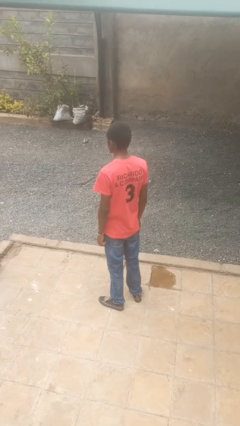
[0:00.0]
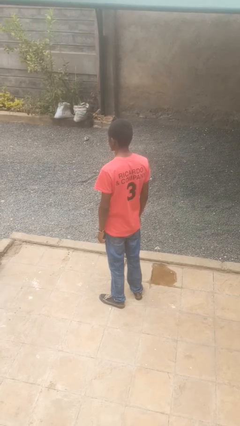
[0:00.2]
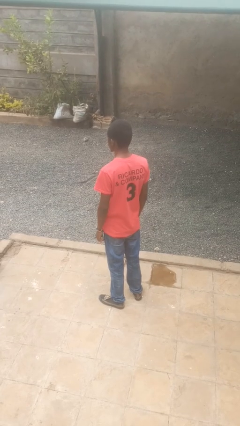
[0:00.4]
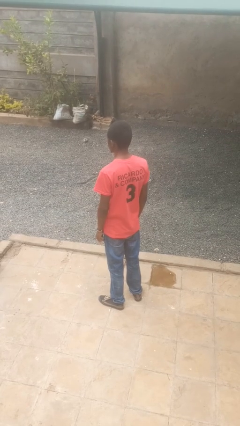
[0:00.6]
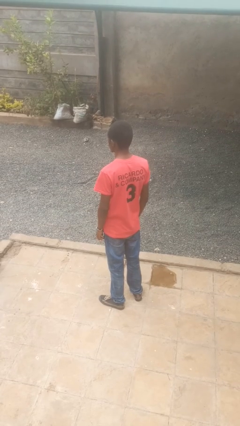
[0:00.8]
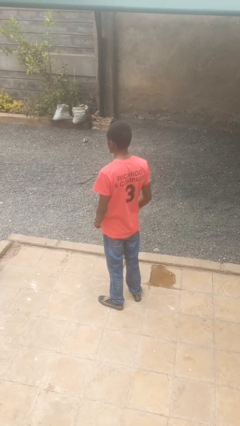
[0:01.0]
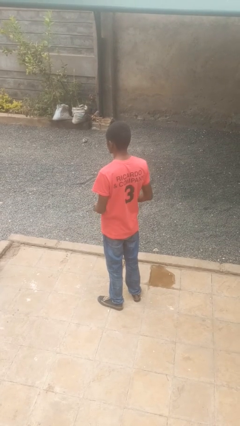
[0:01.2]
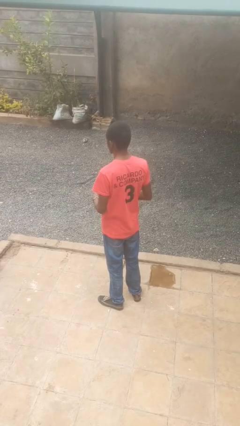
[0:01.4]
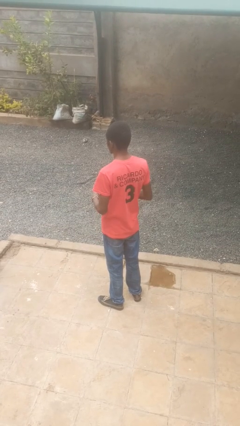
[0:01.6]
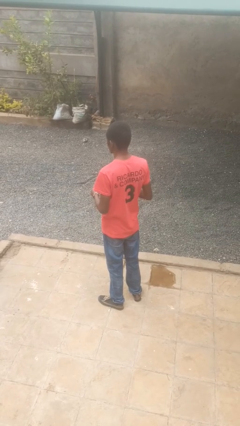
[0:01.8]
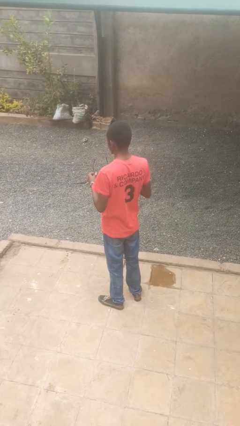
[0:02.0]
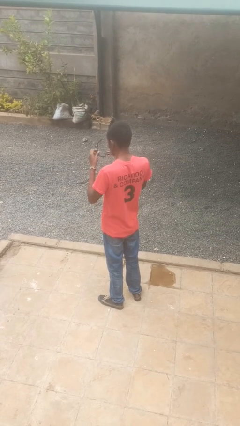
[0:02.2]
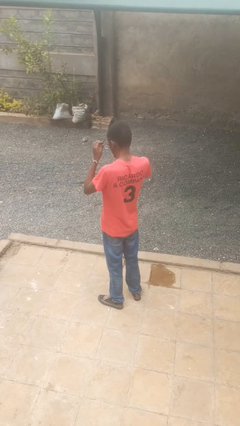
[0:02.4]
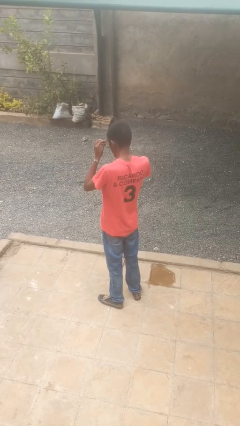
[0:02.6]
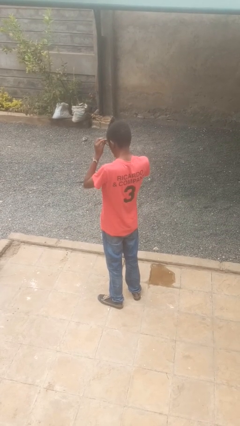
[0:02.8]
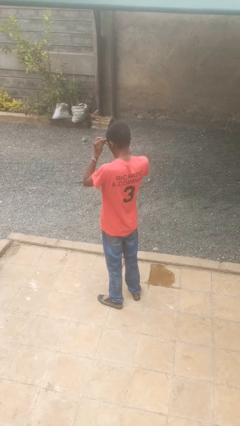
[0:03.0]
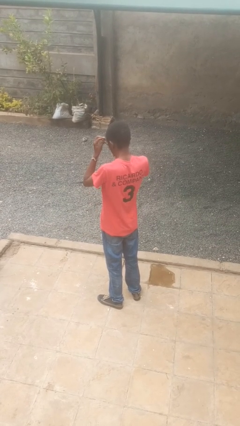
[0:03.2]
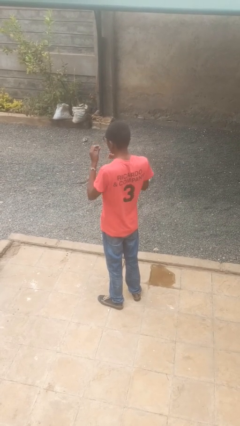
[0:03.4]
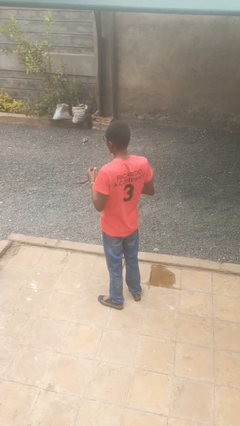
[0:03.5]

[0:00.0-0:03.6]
person puts on glasses

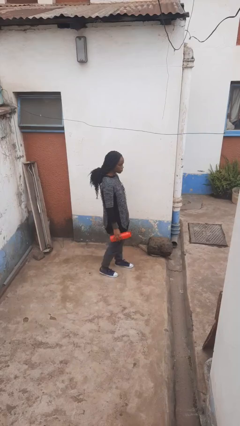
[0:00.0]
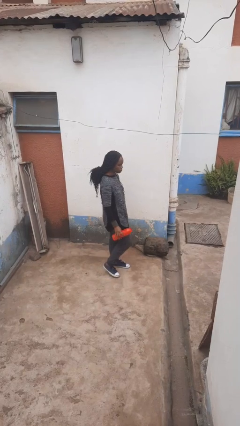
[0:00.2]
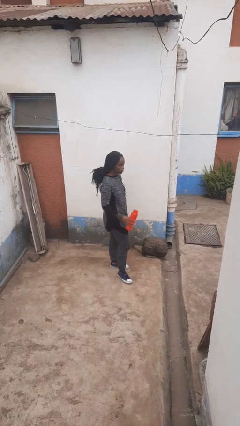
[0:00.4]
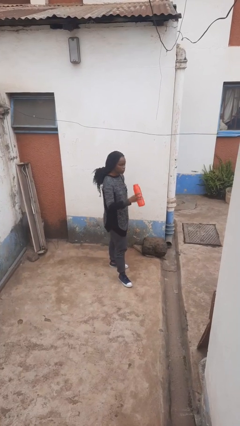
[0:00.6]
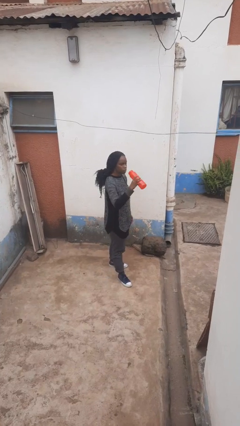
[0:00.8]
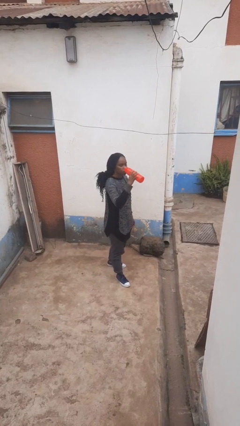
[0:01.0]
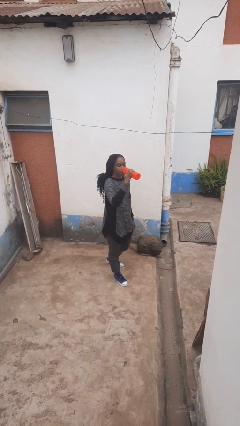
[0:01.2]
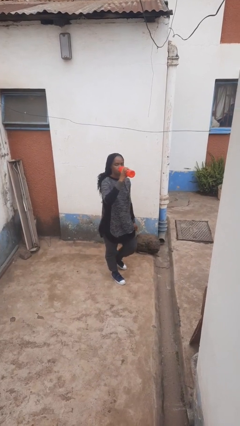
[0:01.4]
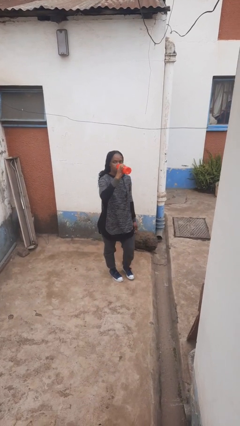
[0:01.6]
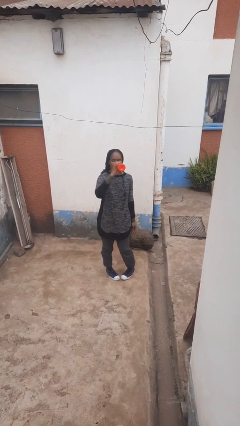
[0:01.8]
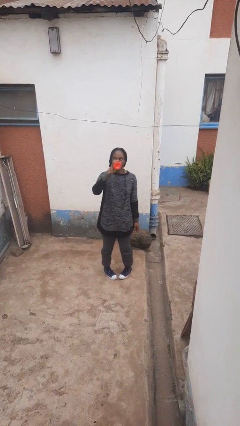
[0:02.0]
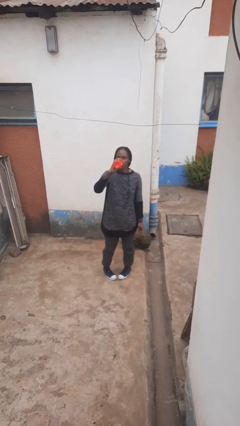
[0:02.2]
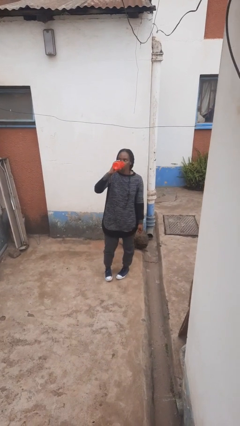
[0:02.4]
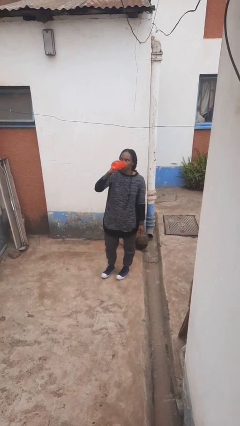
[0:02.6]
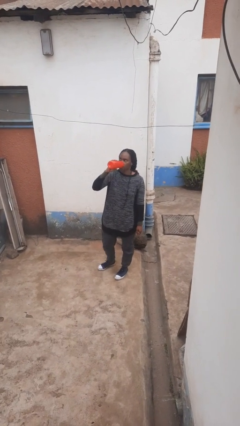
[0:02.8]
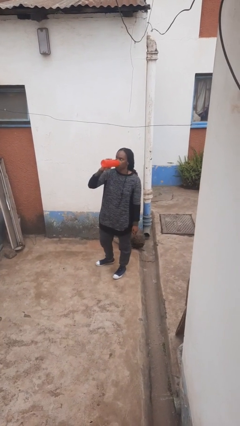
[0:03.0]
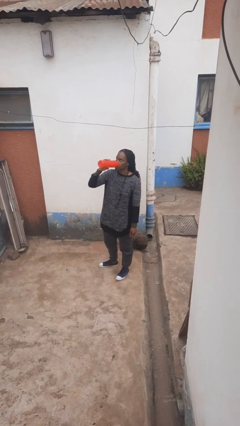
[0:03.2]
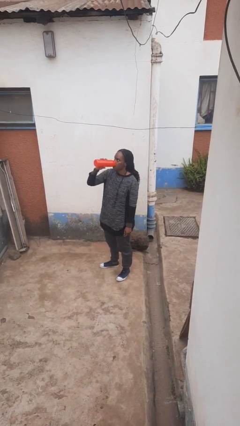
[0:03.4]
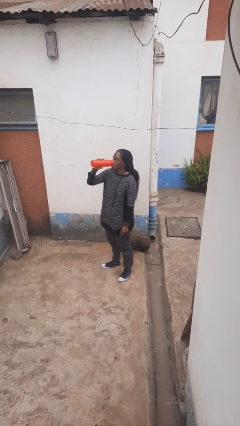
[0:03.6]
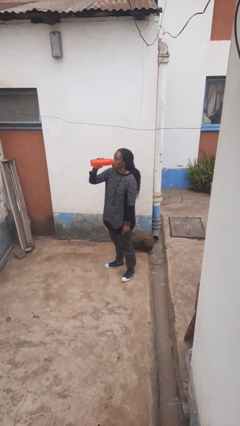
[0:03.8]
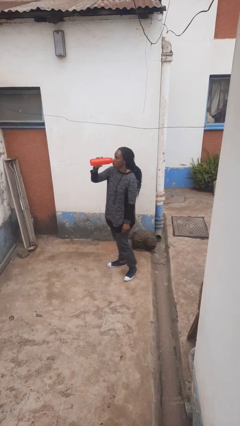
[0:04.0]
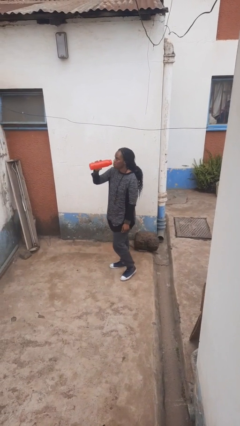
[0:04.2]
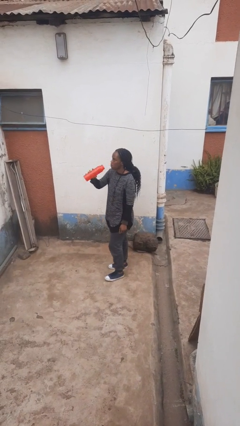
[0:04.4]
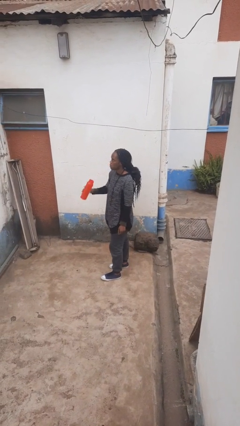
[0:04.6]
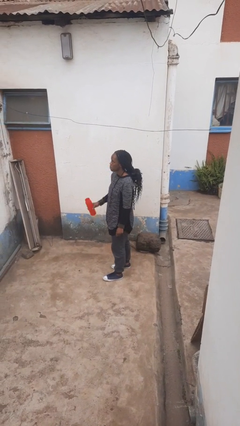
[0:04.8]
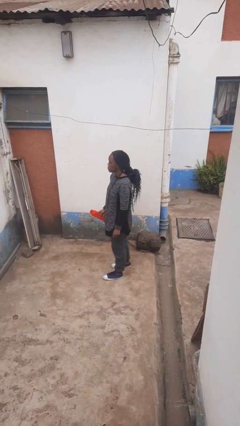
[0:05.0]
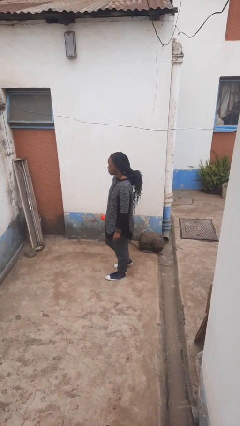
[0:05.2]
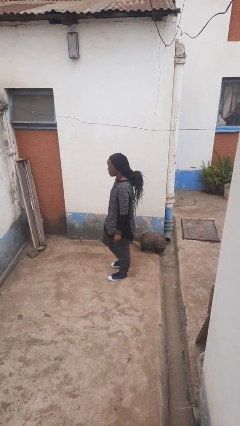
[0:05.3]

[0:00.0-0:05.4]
person drinks from bottle

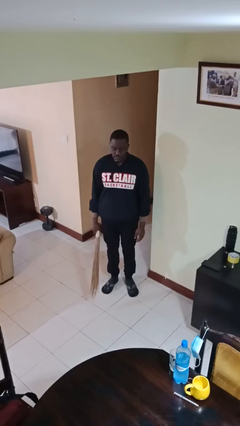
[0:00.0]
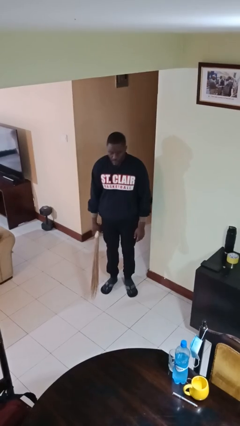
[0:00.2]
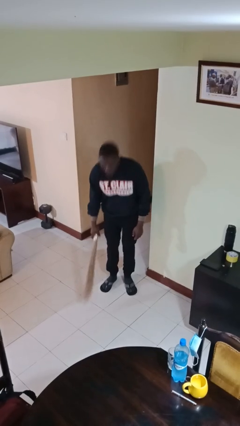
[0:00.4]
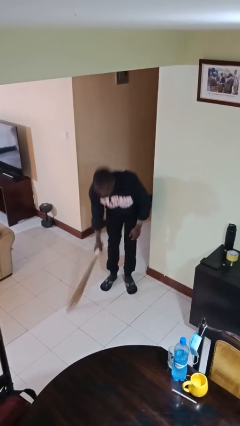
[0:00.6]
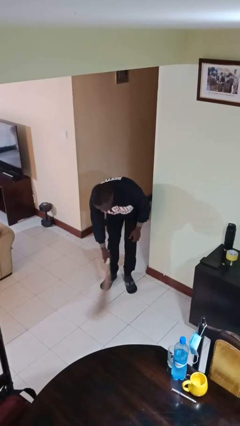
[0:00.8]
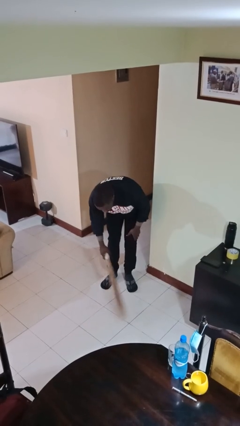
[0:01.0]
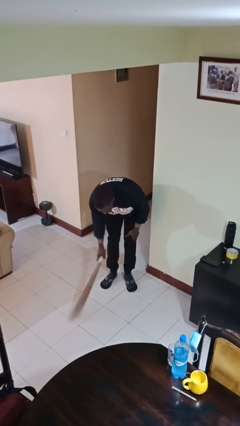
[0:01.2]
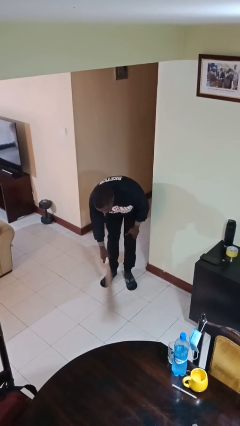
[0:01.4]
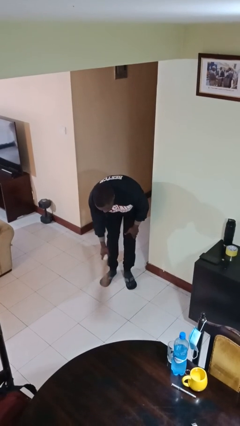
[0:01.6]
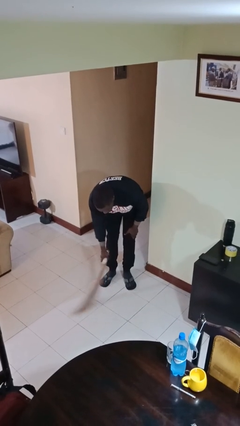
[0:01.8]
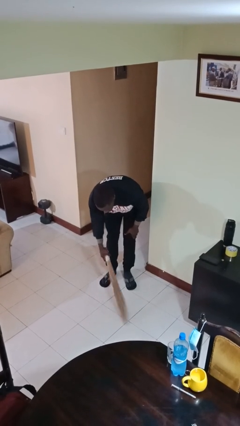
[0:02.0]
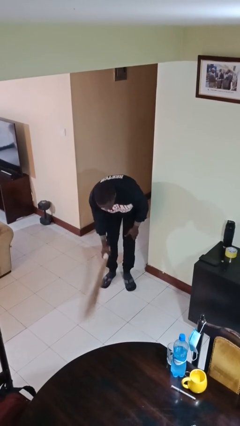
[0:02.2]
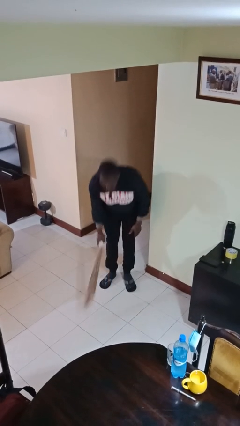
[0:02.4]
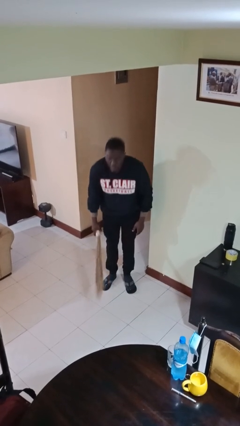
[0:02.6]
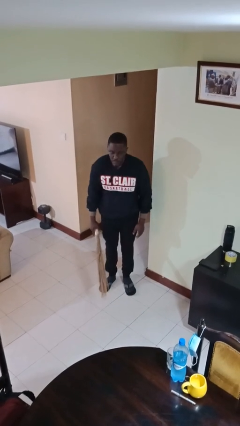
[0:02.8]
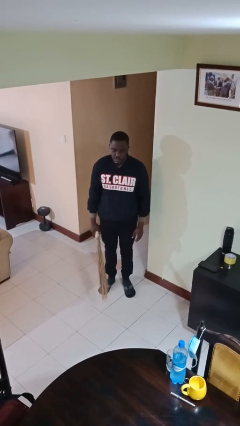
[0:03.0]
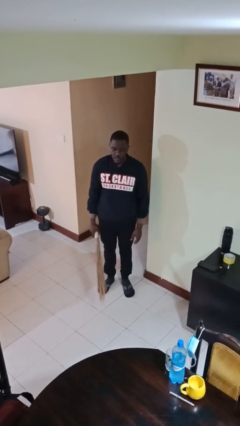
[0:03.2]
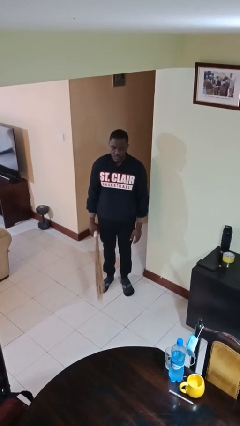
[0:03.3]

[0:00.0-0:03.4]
person sweeps floor

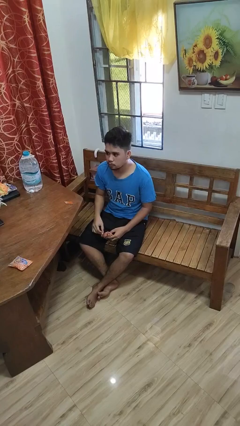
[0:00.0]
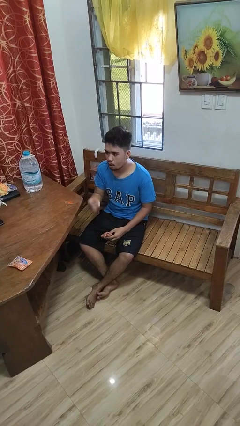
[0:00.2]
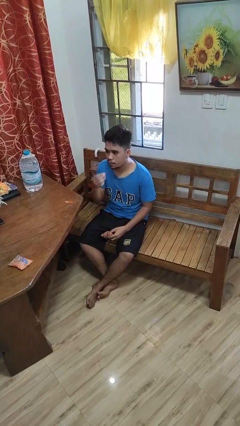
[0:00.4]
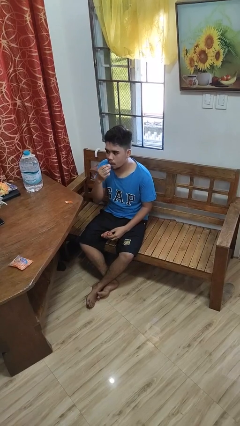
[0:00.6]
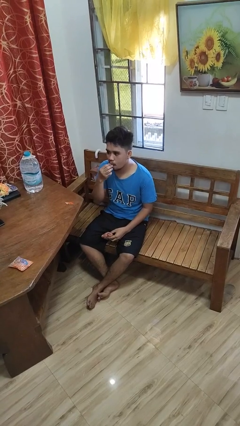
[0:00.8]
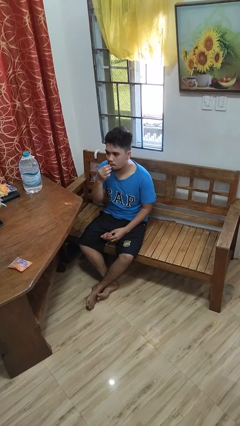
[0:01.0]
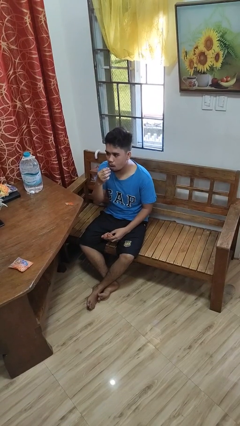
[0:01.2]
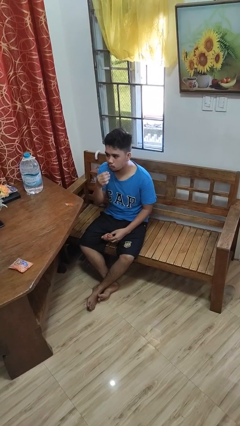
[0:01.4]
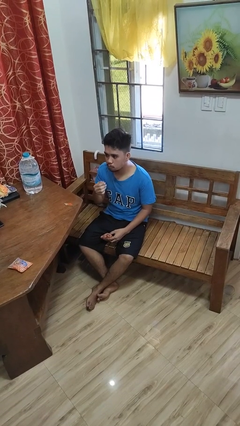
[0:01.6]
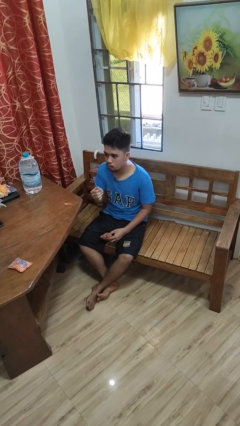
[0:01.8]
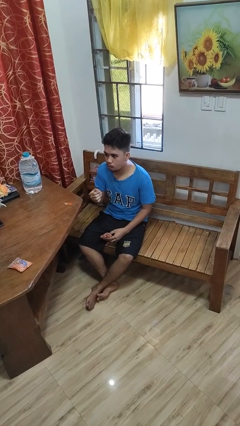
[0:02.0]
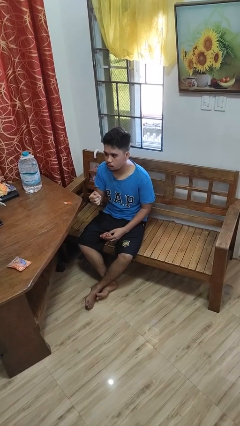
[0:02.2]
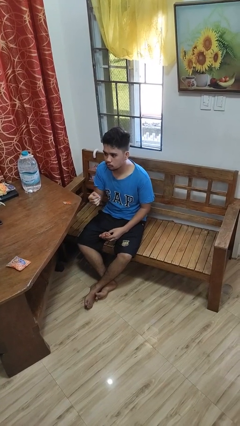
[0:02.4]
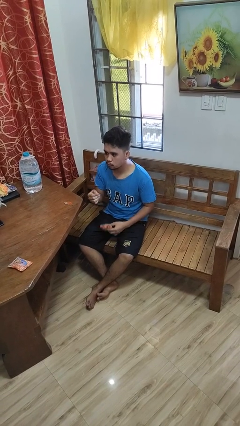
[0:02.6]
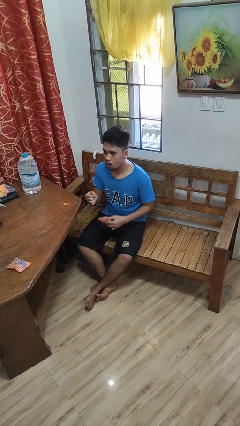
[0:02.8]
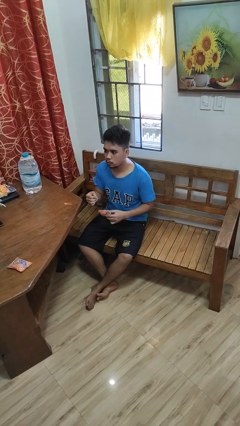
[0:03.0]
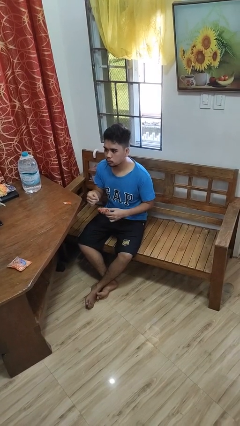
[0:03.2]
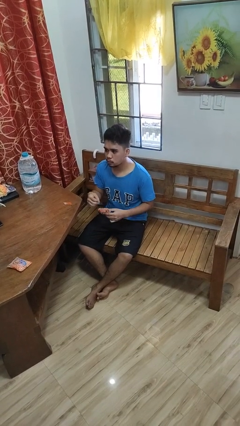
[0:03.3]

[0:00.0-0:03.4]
person eats snack from bag

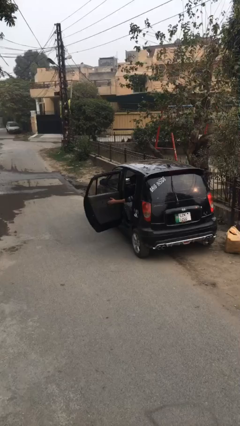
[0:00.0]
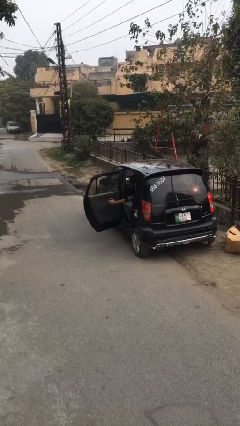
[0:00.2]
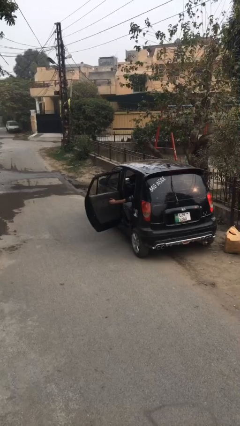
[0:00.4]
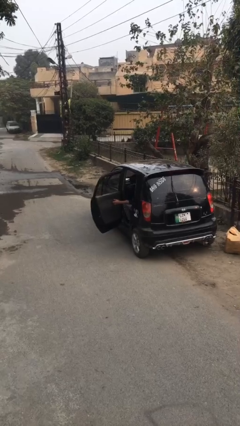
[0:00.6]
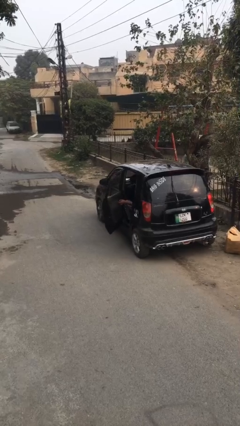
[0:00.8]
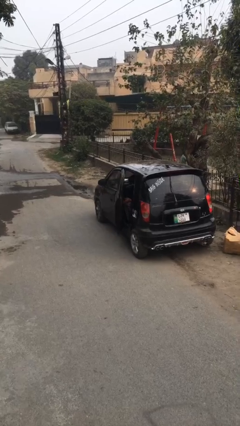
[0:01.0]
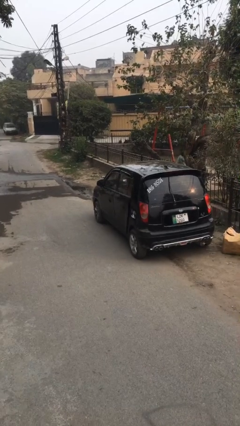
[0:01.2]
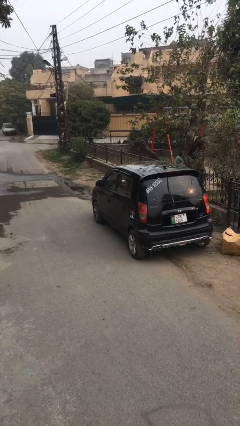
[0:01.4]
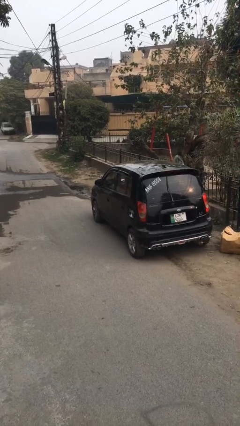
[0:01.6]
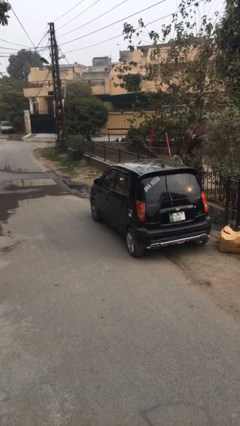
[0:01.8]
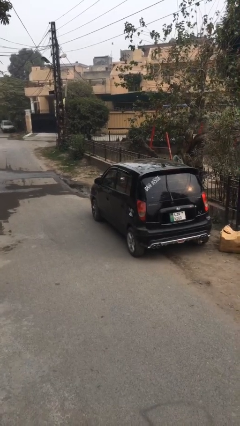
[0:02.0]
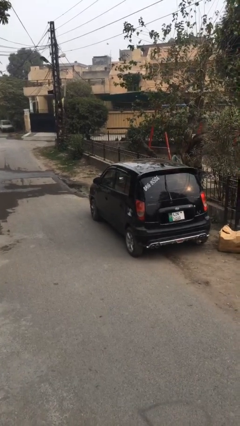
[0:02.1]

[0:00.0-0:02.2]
person closes car door
